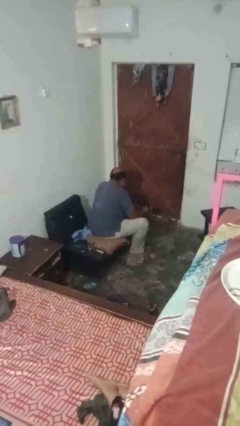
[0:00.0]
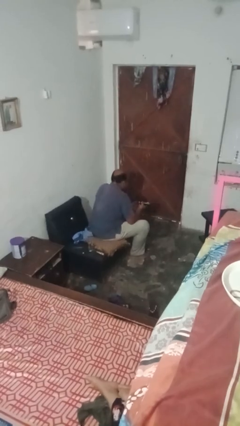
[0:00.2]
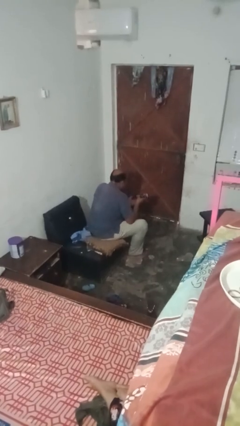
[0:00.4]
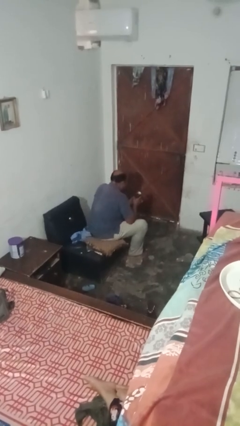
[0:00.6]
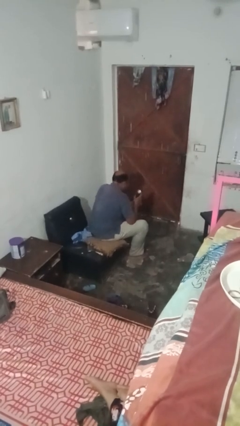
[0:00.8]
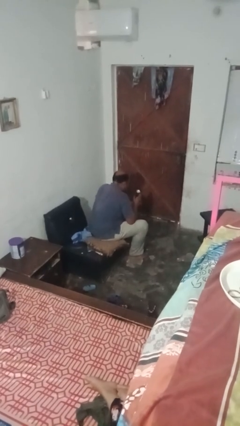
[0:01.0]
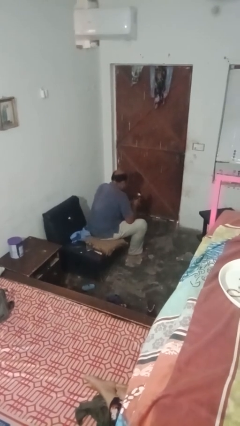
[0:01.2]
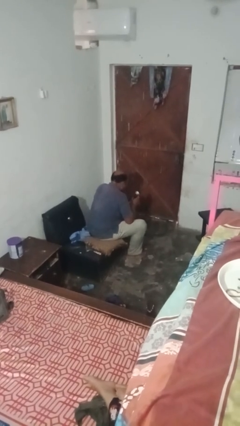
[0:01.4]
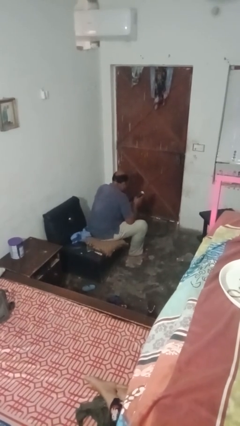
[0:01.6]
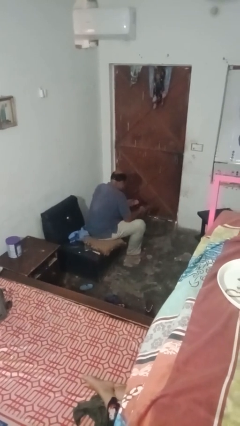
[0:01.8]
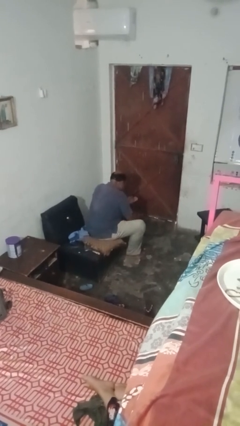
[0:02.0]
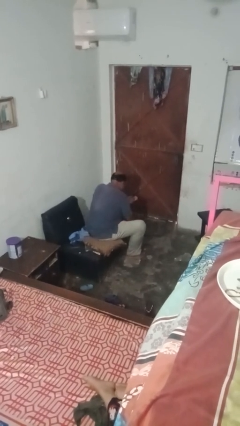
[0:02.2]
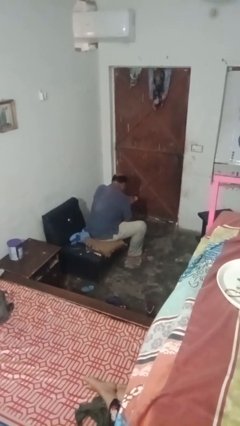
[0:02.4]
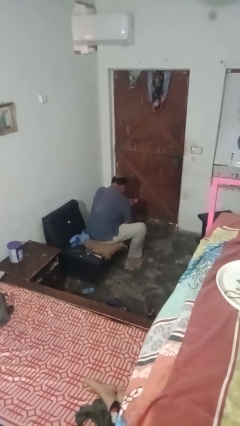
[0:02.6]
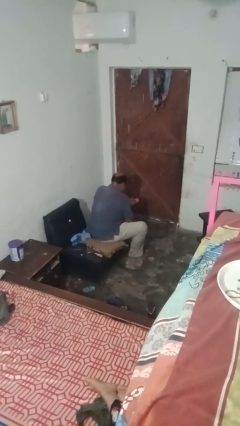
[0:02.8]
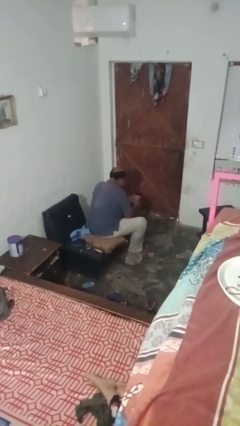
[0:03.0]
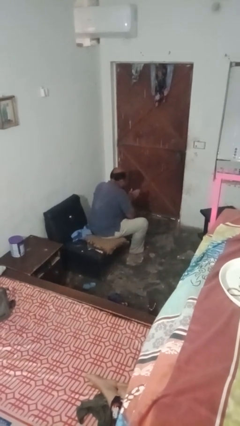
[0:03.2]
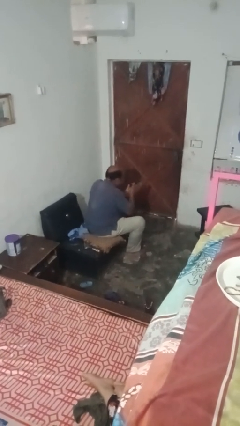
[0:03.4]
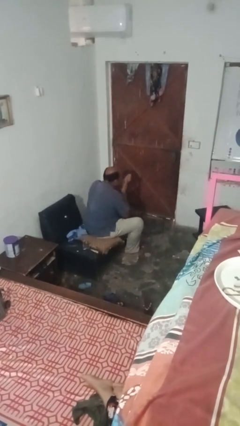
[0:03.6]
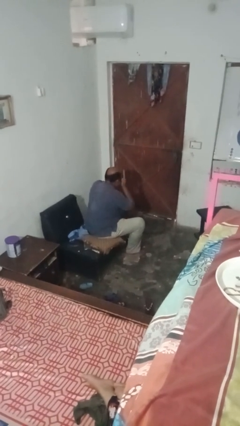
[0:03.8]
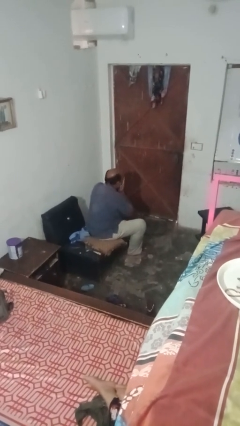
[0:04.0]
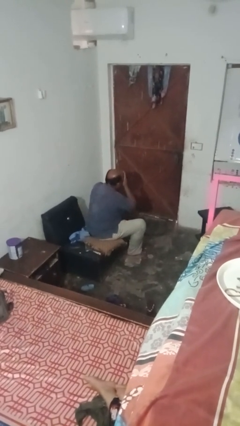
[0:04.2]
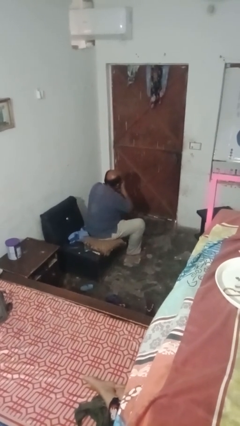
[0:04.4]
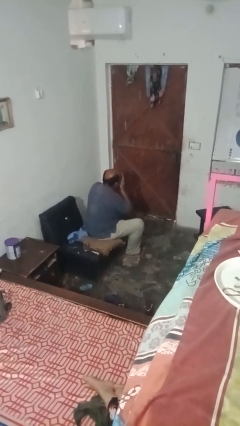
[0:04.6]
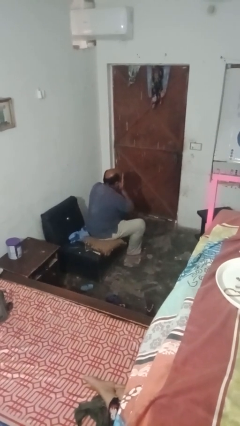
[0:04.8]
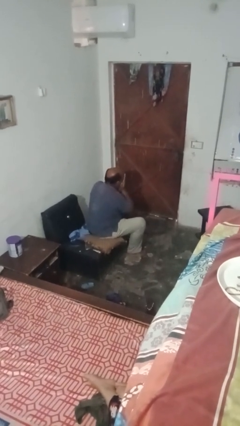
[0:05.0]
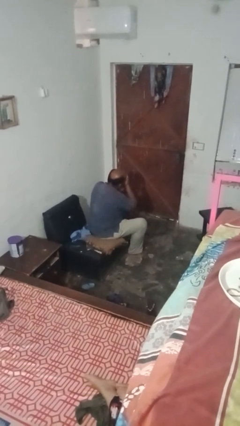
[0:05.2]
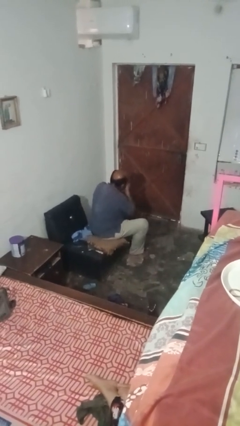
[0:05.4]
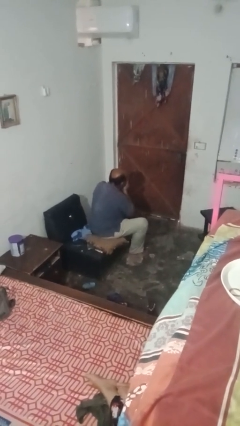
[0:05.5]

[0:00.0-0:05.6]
person applies foundation makeup

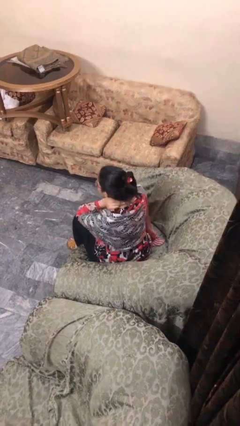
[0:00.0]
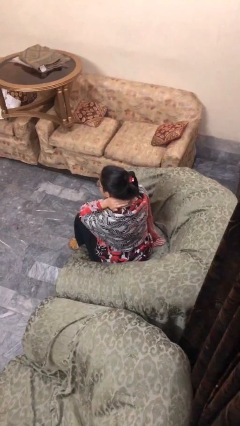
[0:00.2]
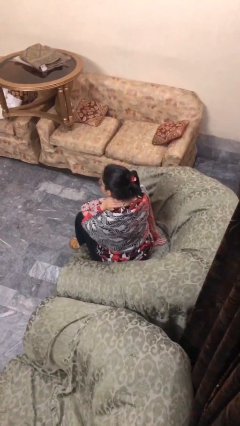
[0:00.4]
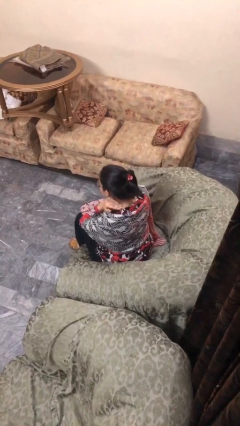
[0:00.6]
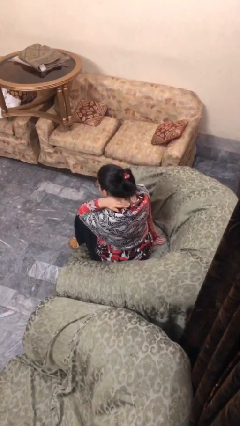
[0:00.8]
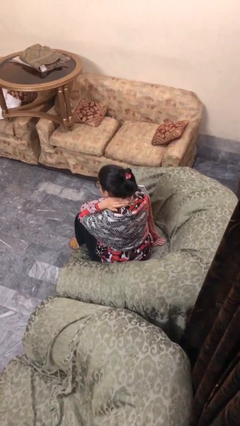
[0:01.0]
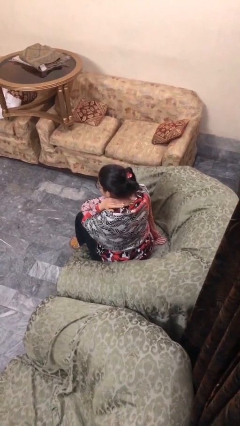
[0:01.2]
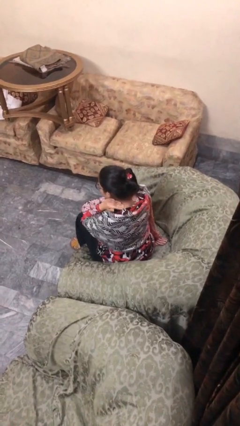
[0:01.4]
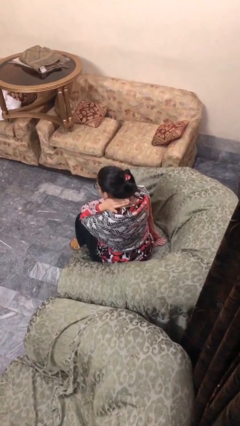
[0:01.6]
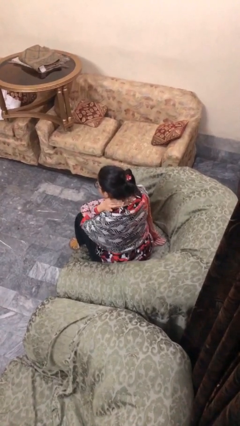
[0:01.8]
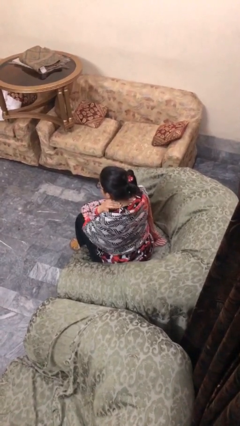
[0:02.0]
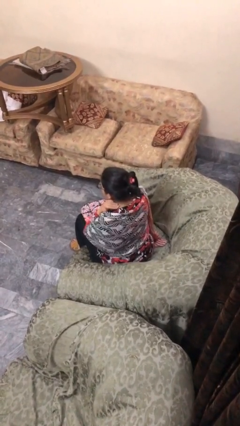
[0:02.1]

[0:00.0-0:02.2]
person rubs neck

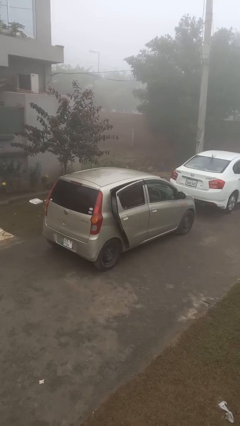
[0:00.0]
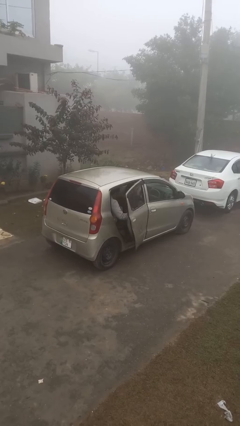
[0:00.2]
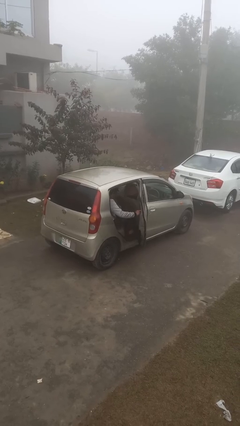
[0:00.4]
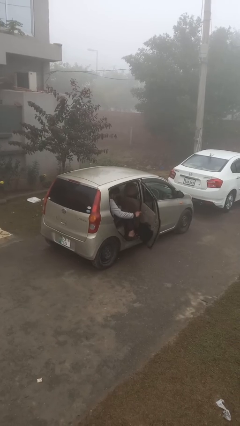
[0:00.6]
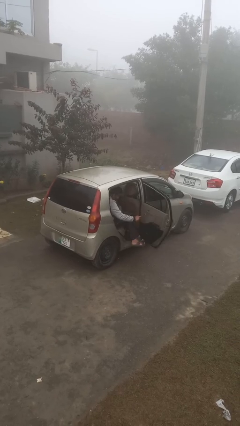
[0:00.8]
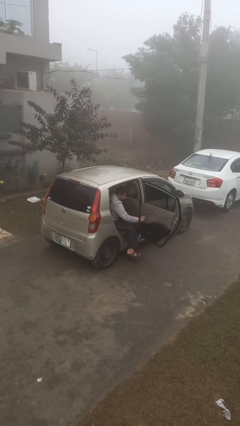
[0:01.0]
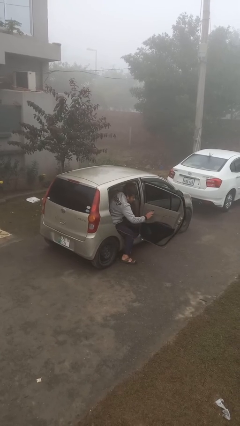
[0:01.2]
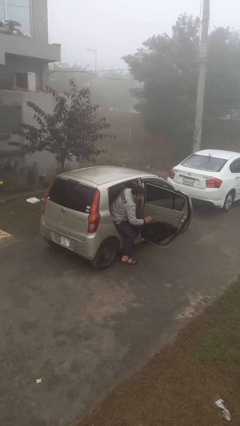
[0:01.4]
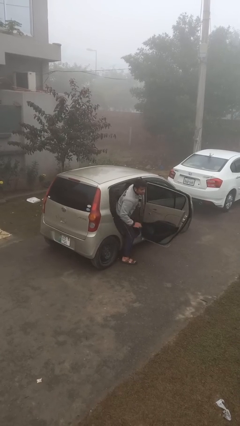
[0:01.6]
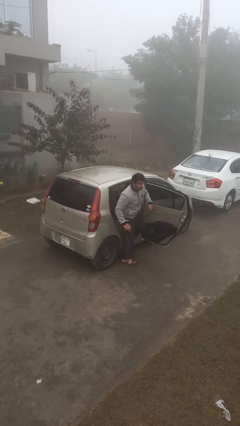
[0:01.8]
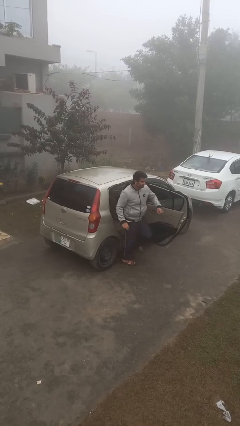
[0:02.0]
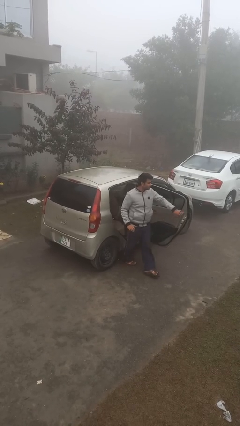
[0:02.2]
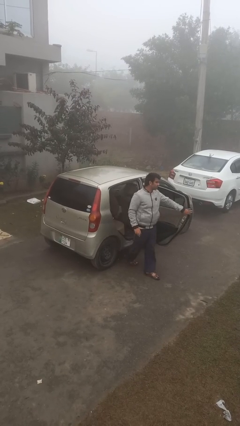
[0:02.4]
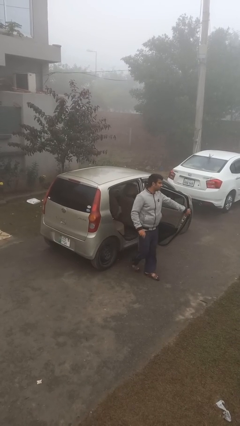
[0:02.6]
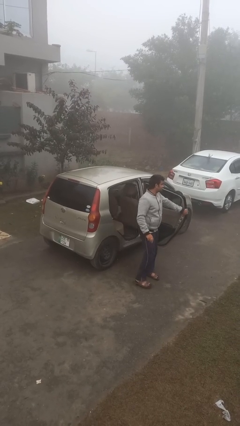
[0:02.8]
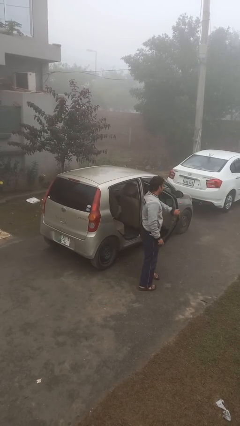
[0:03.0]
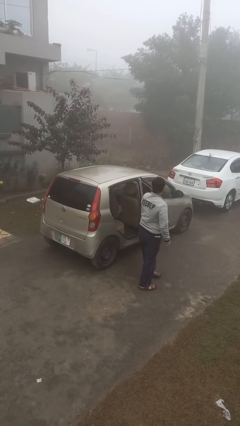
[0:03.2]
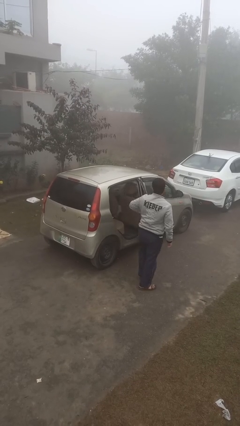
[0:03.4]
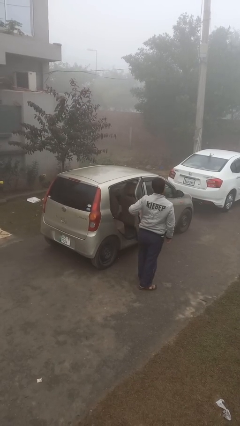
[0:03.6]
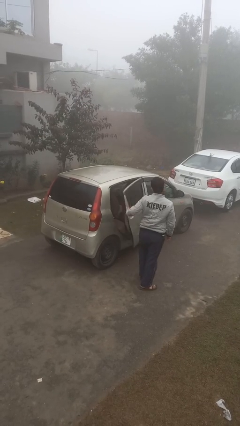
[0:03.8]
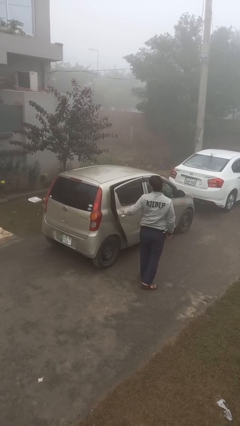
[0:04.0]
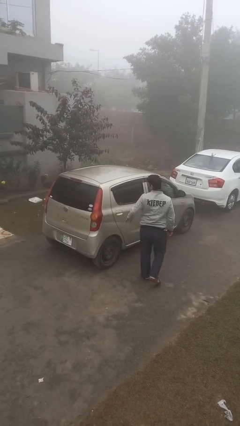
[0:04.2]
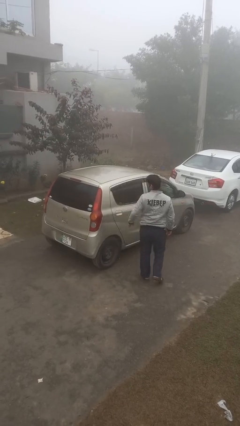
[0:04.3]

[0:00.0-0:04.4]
car drops off person

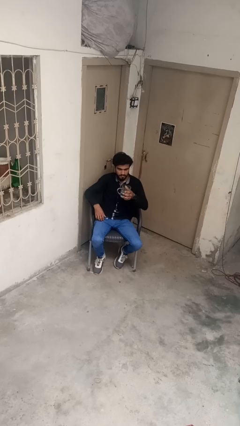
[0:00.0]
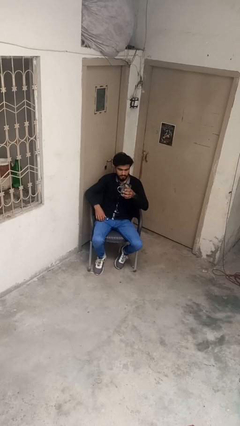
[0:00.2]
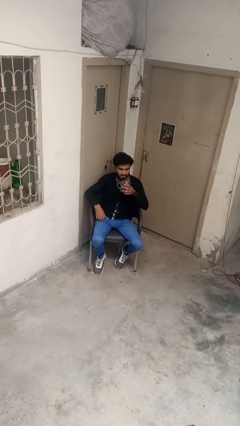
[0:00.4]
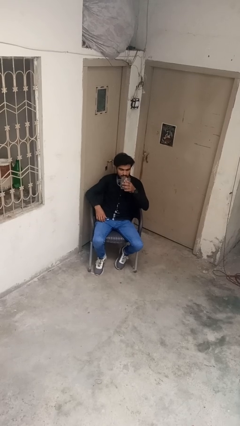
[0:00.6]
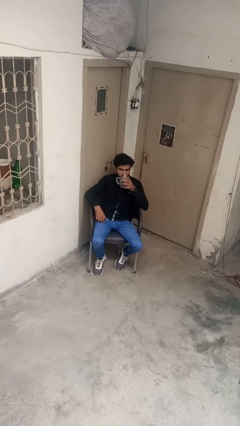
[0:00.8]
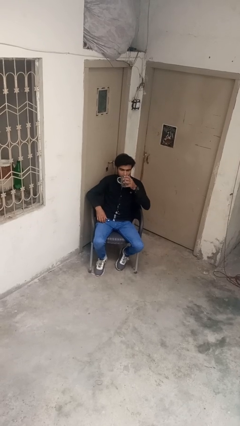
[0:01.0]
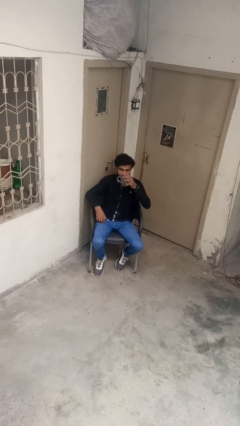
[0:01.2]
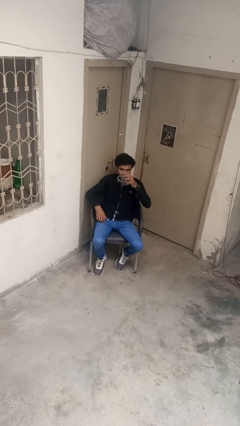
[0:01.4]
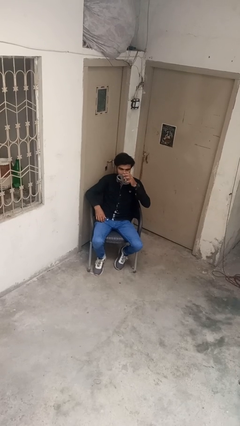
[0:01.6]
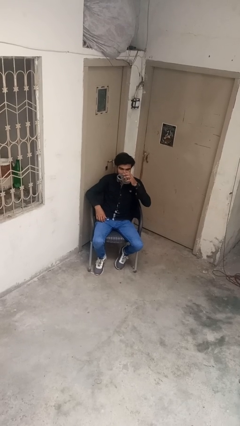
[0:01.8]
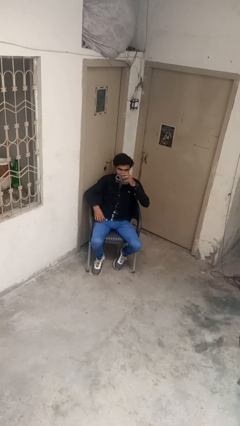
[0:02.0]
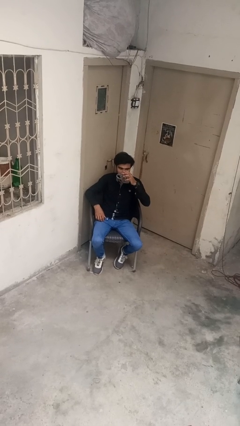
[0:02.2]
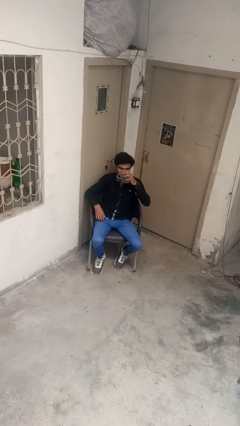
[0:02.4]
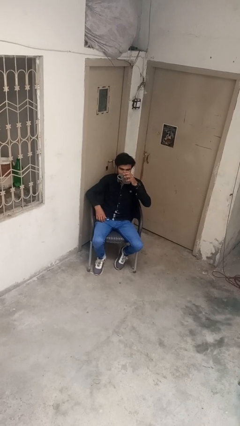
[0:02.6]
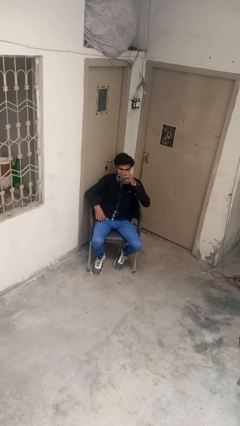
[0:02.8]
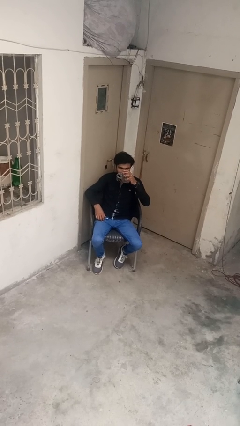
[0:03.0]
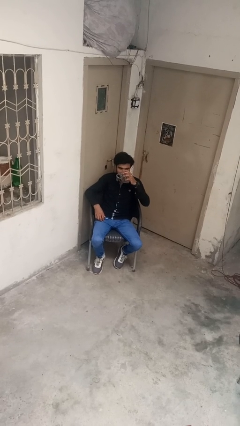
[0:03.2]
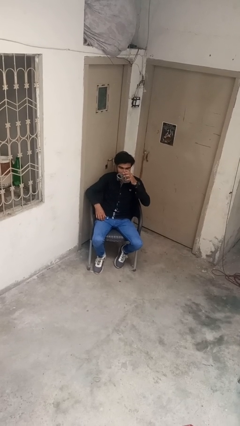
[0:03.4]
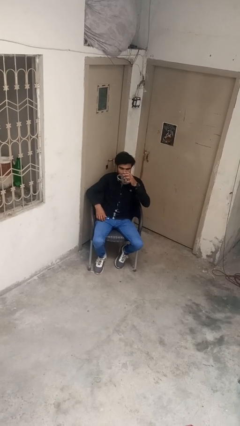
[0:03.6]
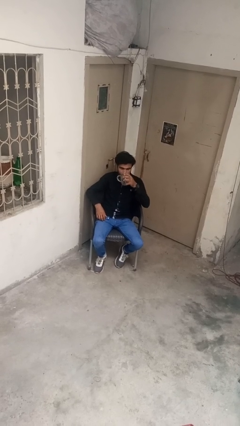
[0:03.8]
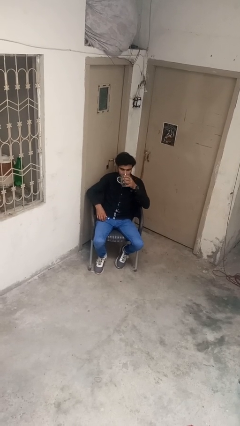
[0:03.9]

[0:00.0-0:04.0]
person drinks from cup

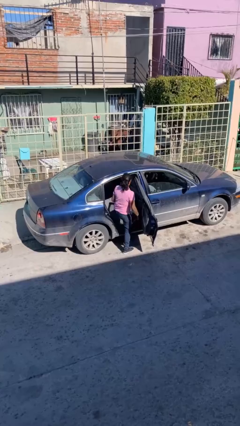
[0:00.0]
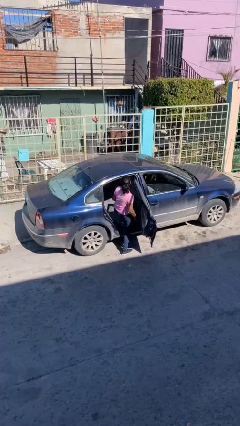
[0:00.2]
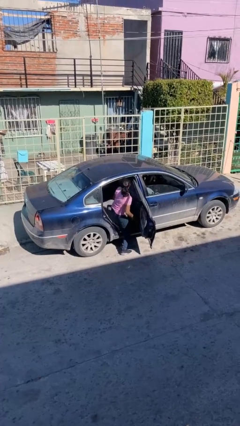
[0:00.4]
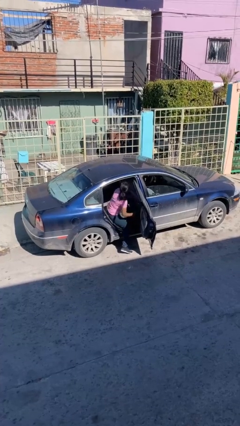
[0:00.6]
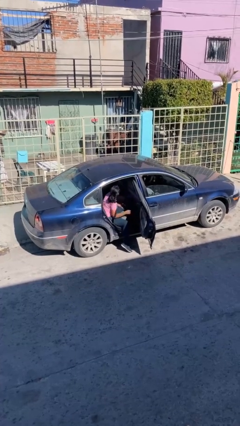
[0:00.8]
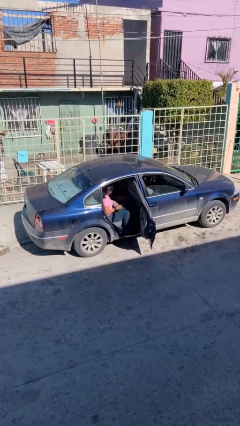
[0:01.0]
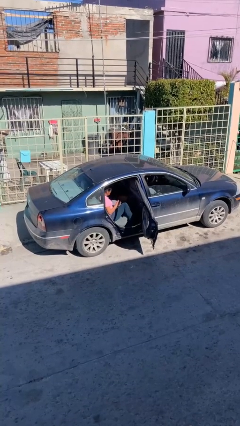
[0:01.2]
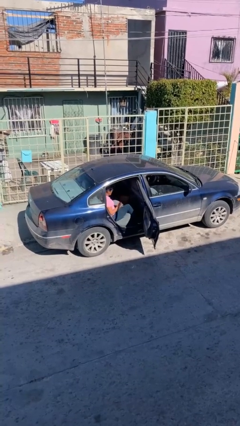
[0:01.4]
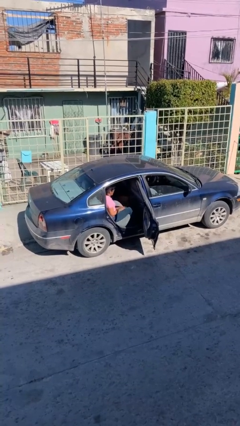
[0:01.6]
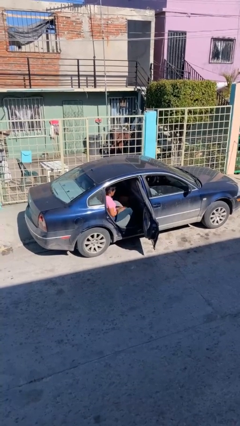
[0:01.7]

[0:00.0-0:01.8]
person enters car
